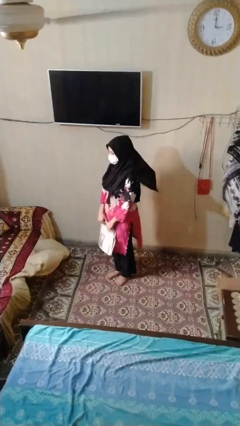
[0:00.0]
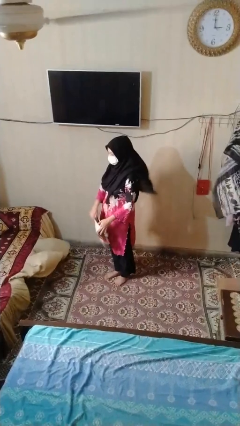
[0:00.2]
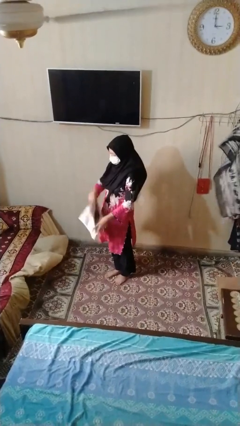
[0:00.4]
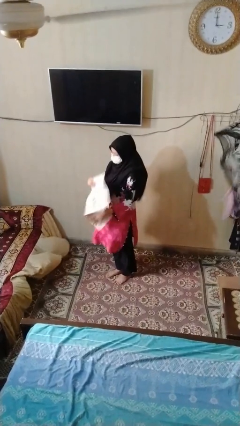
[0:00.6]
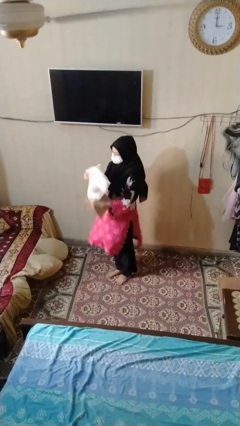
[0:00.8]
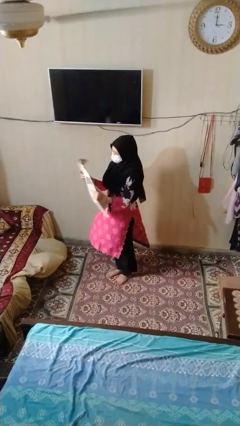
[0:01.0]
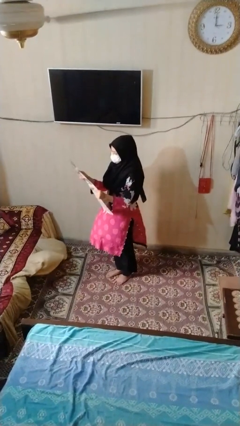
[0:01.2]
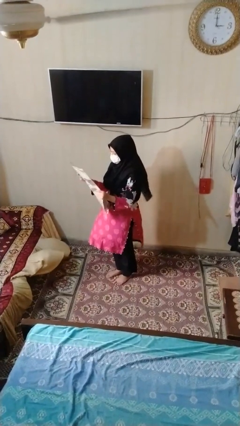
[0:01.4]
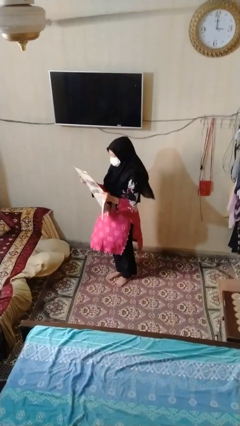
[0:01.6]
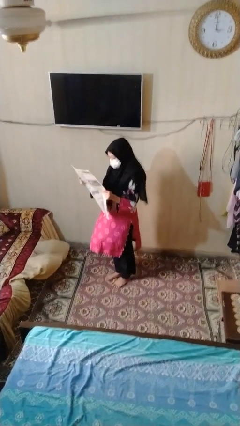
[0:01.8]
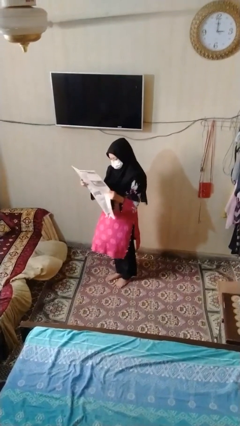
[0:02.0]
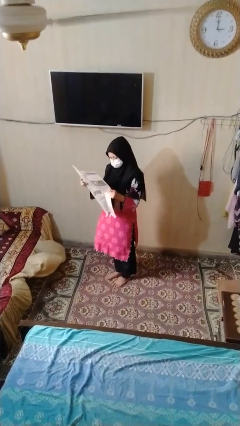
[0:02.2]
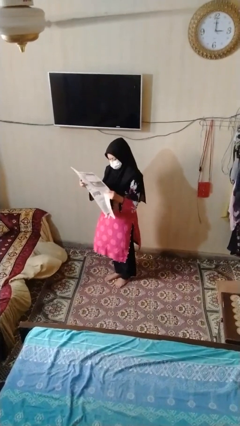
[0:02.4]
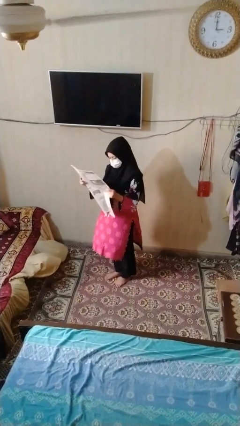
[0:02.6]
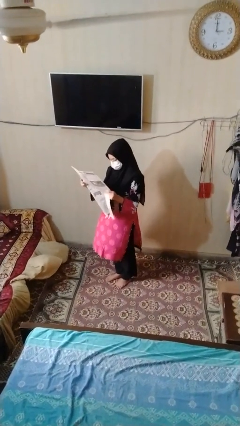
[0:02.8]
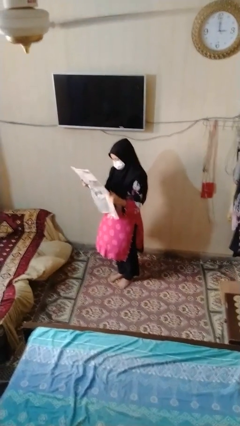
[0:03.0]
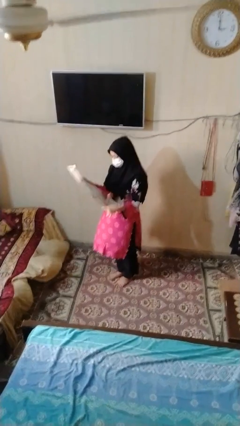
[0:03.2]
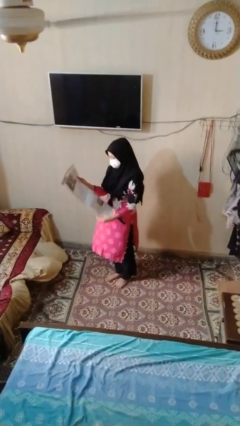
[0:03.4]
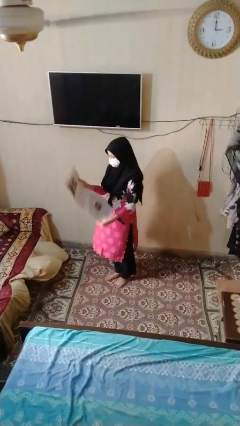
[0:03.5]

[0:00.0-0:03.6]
person reads newspaper

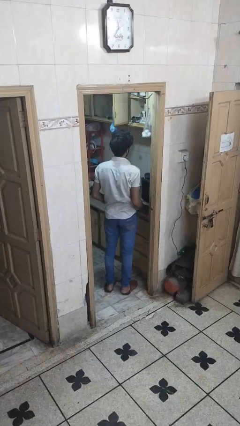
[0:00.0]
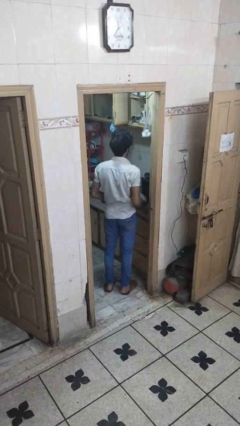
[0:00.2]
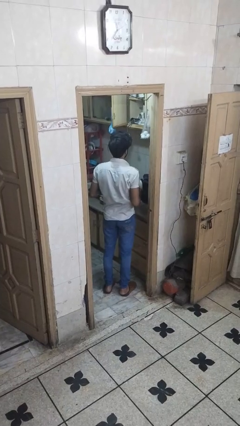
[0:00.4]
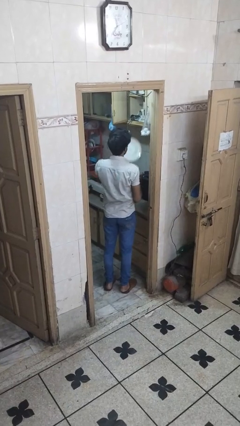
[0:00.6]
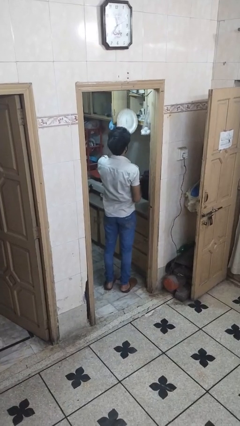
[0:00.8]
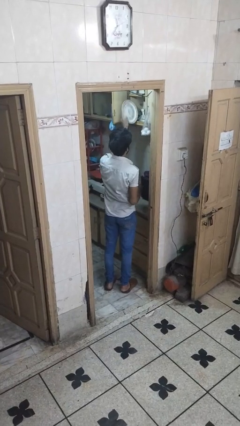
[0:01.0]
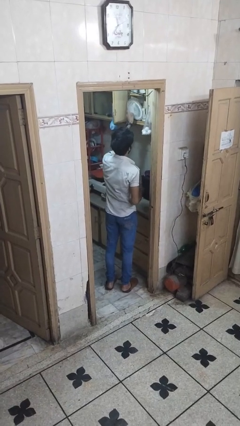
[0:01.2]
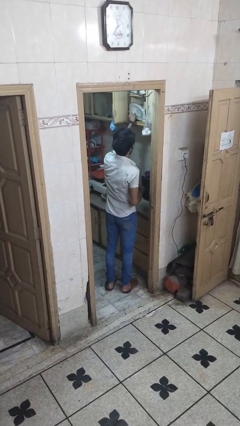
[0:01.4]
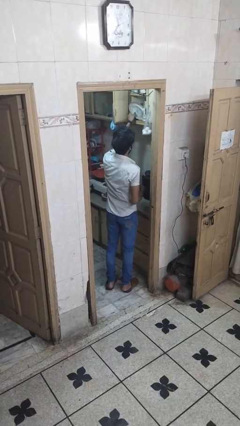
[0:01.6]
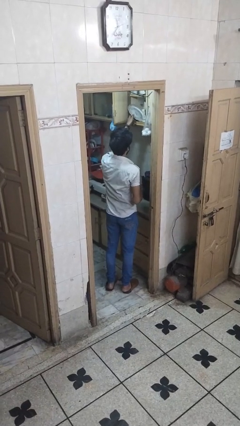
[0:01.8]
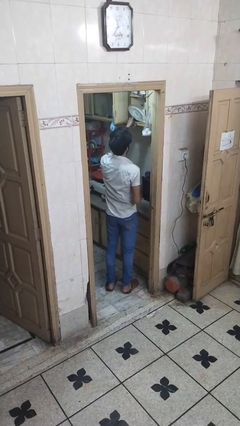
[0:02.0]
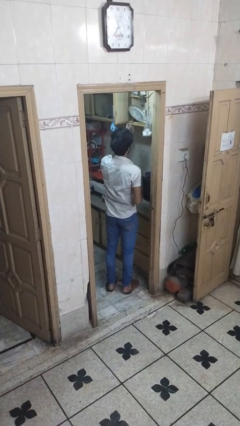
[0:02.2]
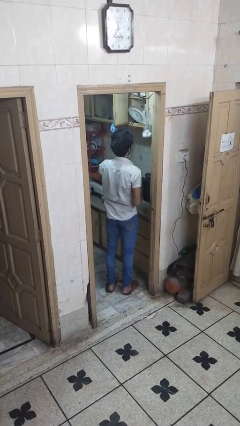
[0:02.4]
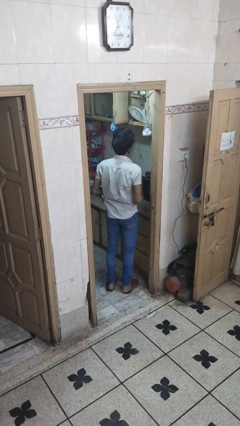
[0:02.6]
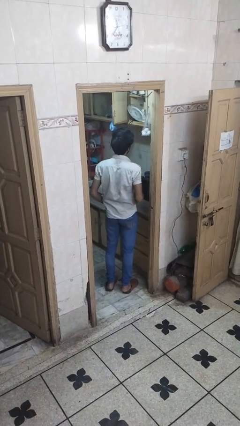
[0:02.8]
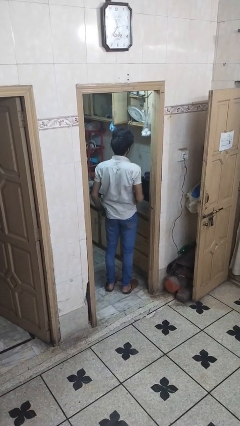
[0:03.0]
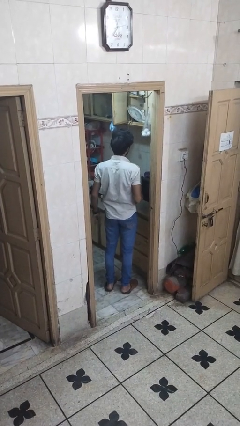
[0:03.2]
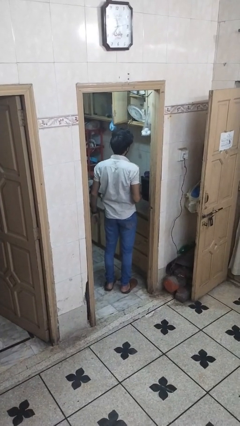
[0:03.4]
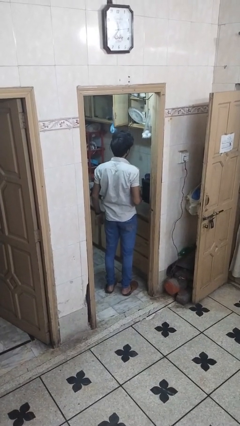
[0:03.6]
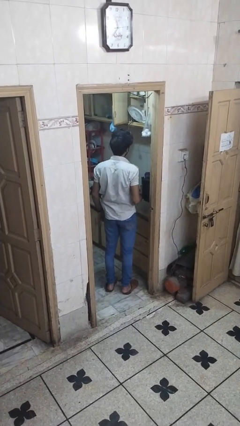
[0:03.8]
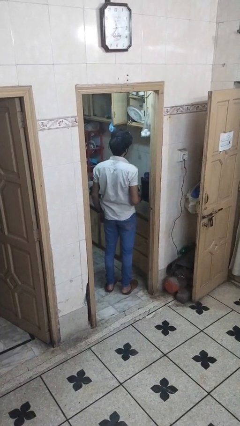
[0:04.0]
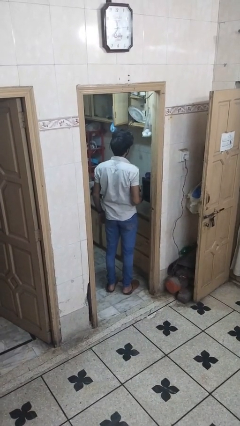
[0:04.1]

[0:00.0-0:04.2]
person puts object in cabinet

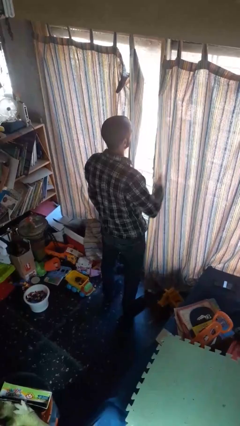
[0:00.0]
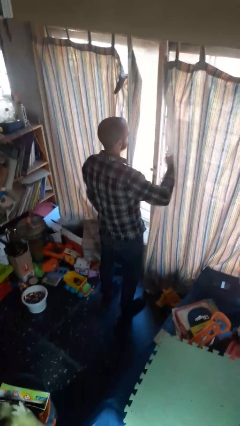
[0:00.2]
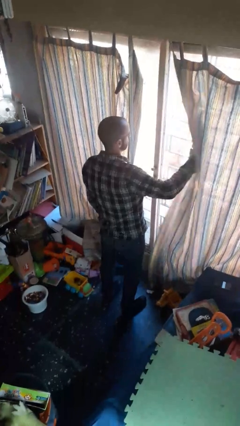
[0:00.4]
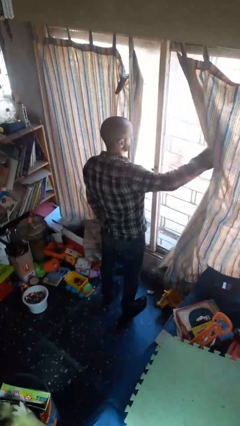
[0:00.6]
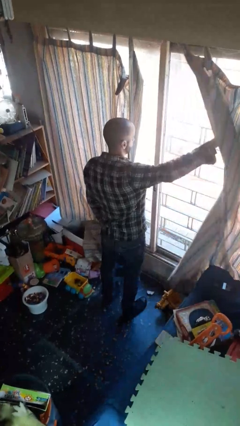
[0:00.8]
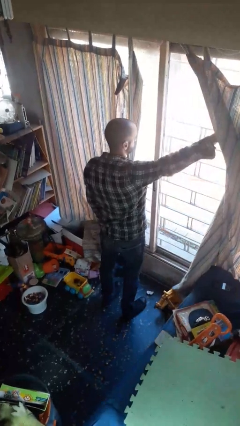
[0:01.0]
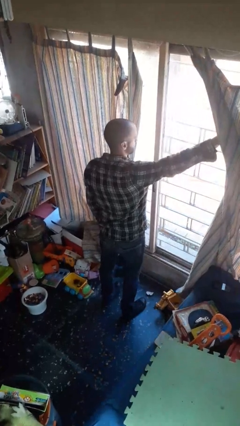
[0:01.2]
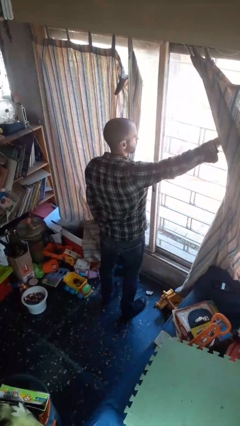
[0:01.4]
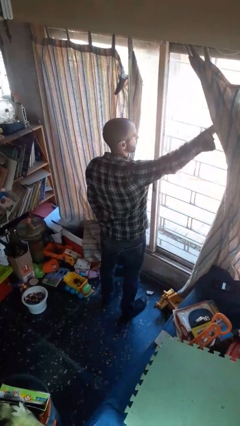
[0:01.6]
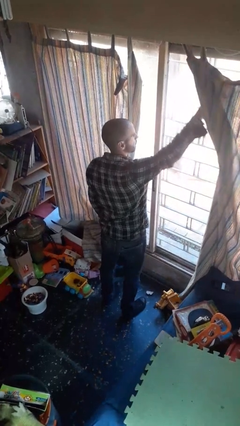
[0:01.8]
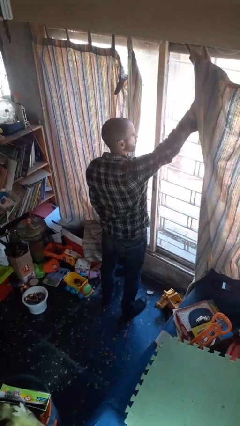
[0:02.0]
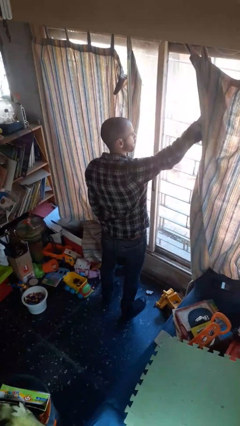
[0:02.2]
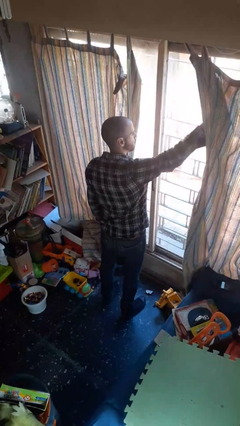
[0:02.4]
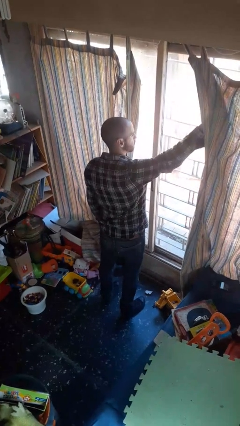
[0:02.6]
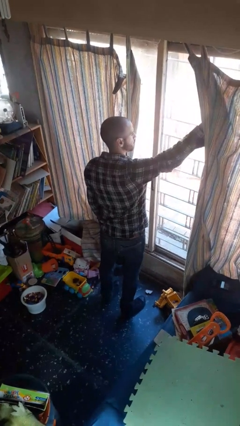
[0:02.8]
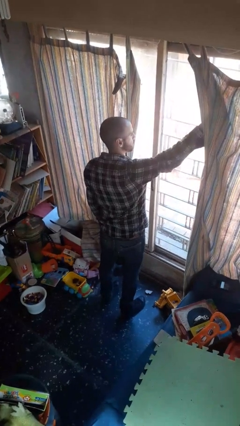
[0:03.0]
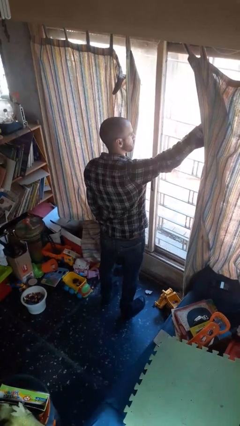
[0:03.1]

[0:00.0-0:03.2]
person opens curtains

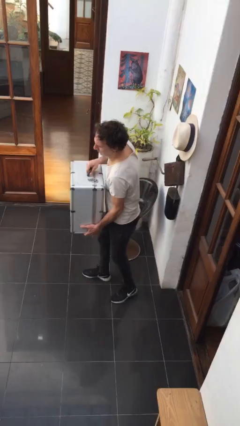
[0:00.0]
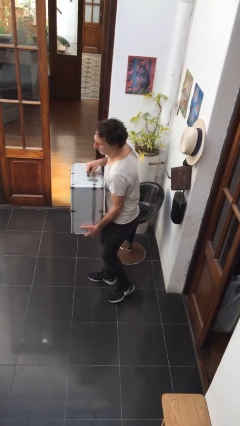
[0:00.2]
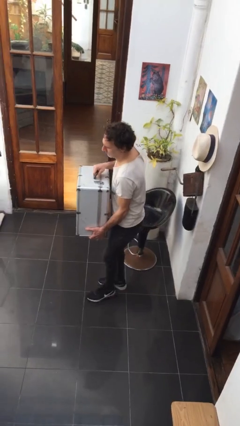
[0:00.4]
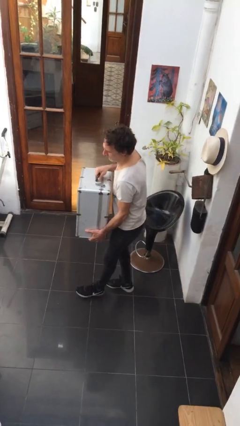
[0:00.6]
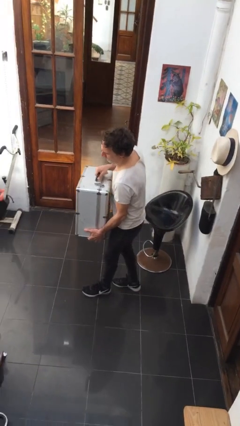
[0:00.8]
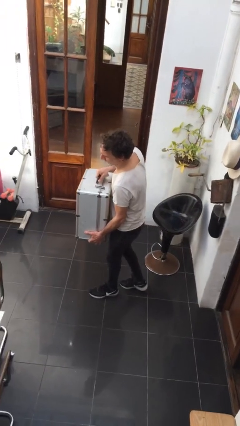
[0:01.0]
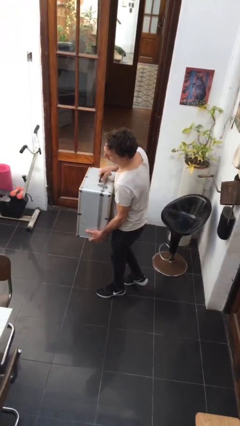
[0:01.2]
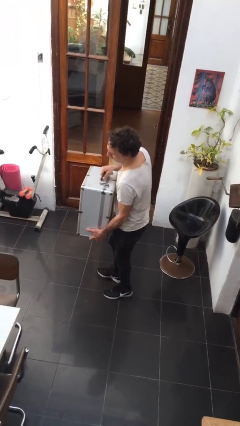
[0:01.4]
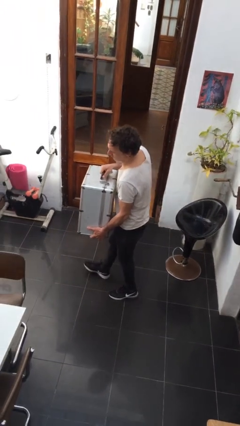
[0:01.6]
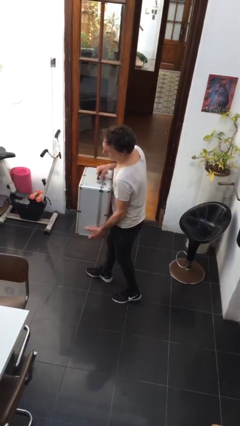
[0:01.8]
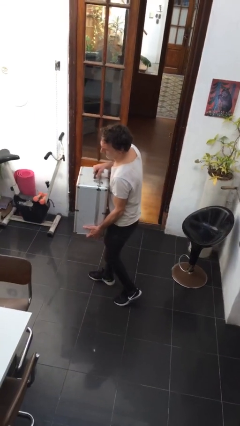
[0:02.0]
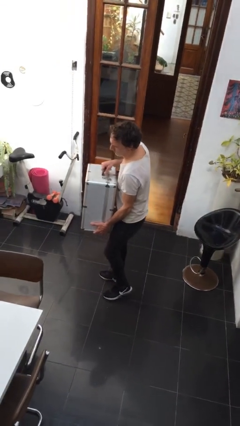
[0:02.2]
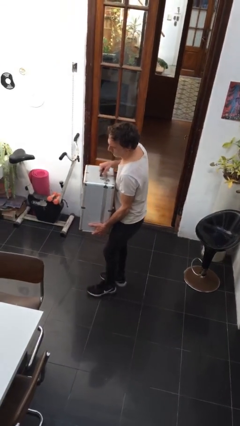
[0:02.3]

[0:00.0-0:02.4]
person carries heavy object

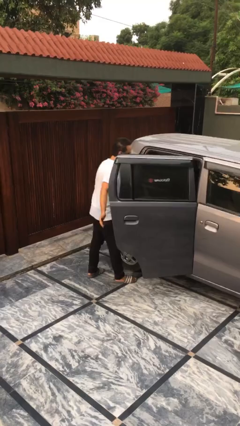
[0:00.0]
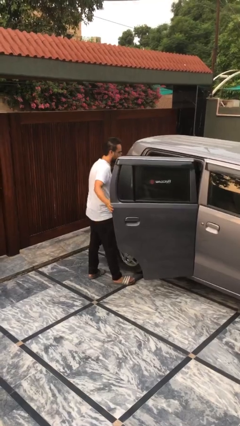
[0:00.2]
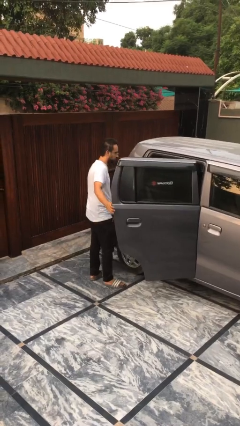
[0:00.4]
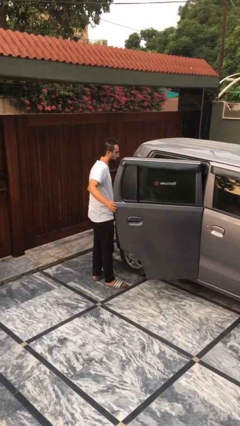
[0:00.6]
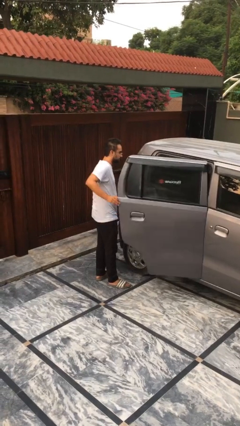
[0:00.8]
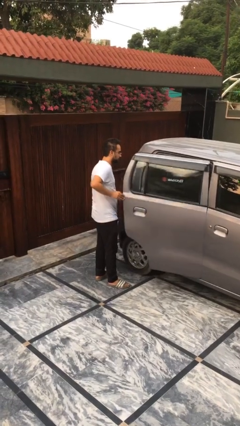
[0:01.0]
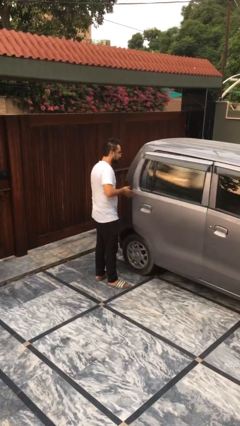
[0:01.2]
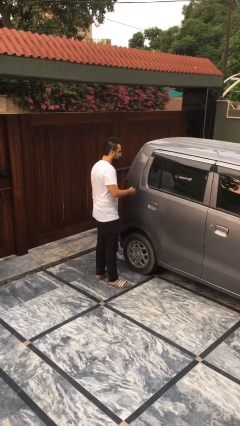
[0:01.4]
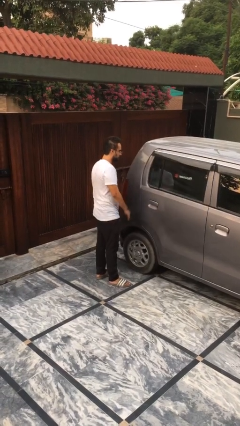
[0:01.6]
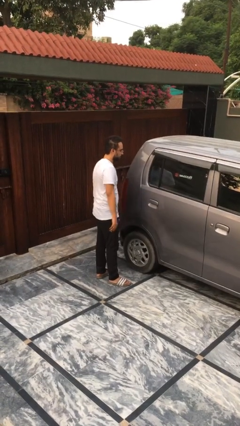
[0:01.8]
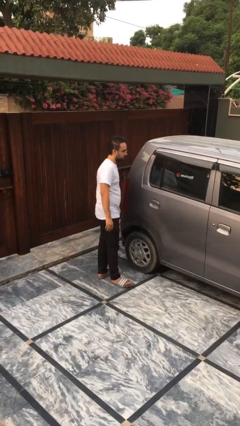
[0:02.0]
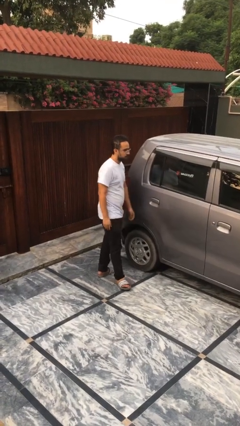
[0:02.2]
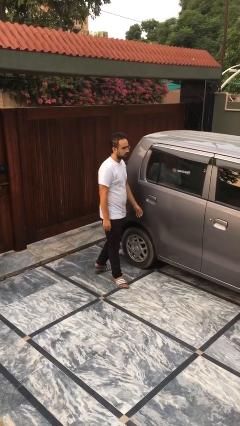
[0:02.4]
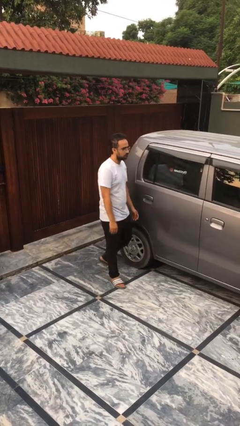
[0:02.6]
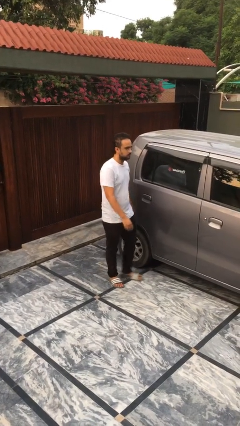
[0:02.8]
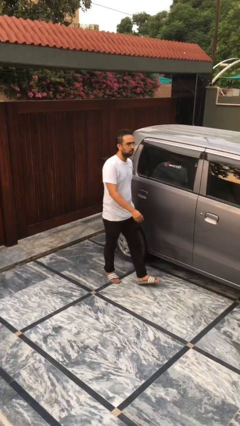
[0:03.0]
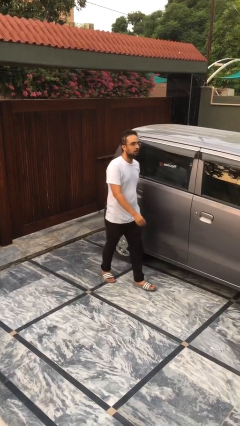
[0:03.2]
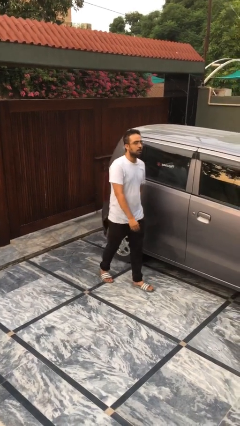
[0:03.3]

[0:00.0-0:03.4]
person closes car door

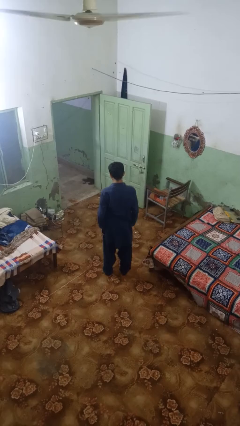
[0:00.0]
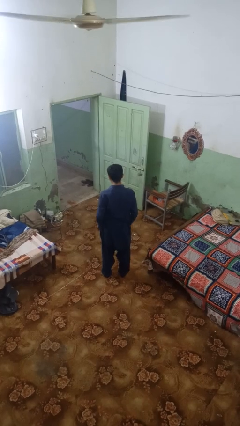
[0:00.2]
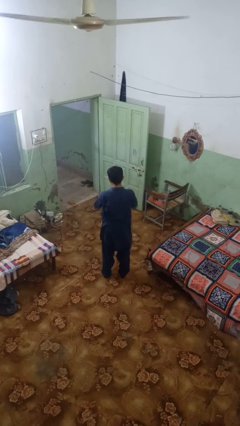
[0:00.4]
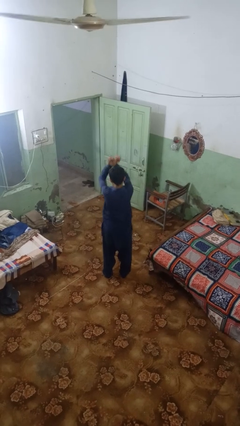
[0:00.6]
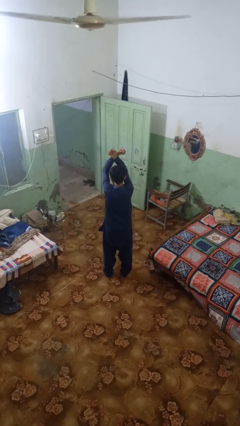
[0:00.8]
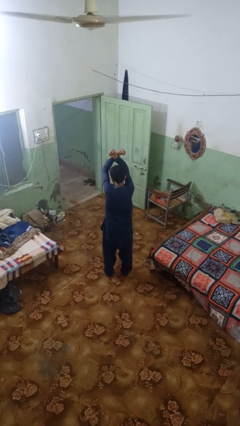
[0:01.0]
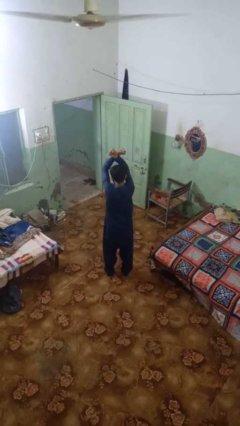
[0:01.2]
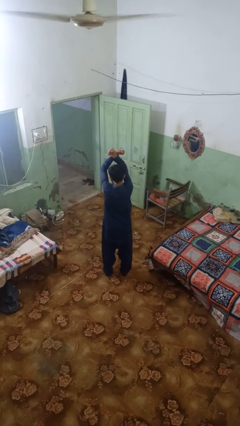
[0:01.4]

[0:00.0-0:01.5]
person crosses arms
